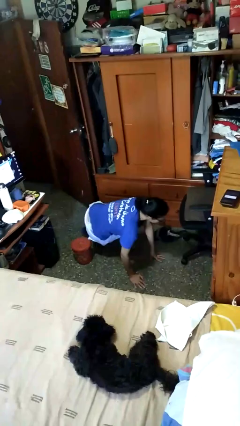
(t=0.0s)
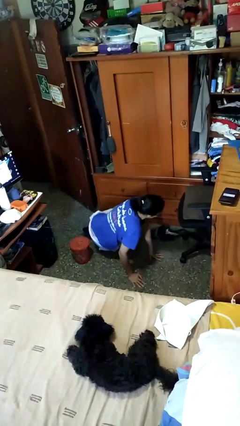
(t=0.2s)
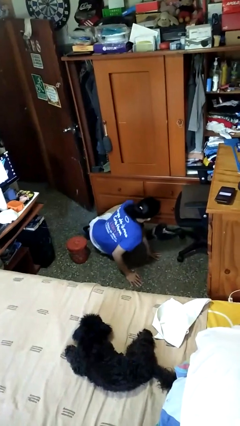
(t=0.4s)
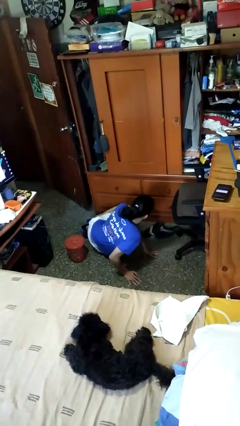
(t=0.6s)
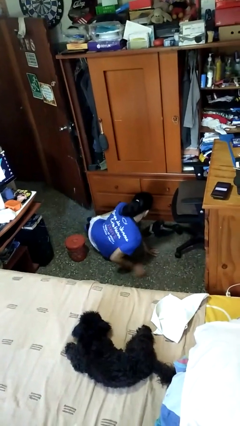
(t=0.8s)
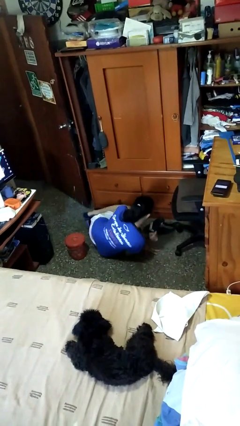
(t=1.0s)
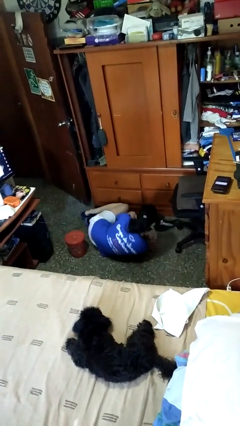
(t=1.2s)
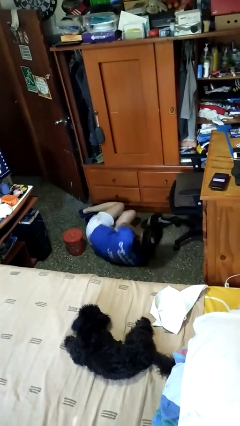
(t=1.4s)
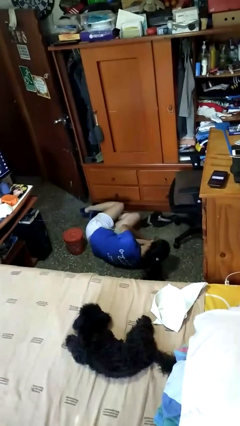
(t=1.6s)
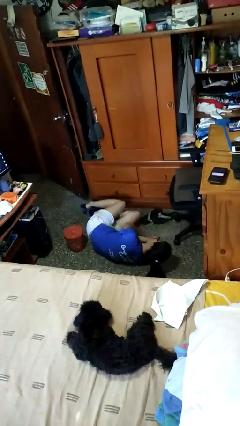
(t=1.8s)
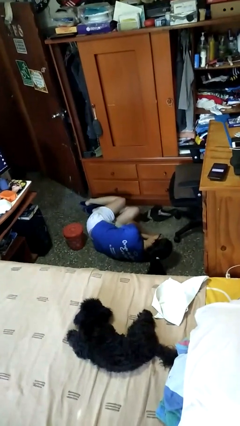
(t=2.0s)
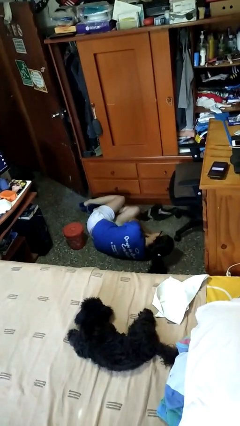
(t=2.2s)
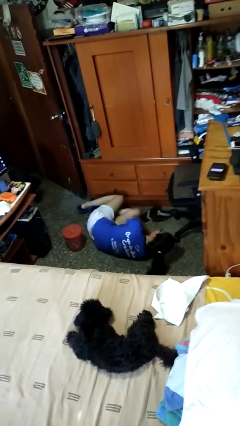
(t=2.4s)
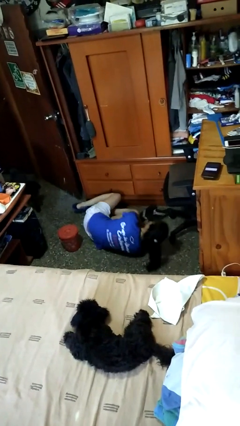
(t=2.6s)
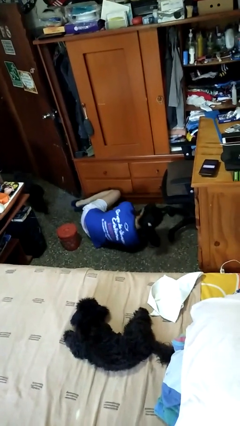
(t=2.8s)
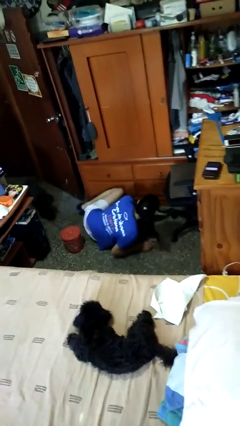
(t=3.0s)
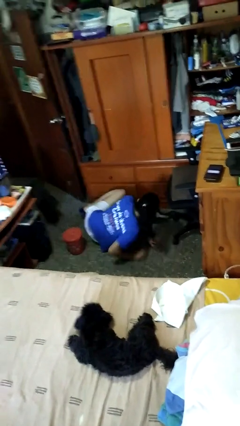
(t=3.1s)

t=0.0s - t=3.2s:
person lies down on floor

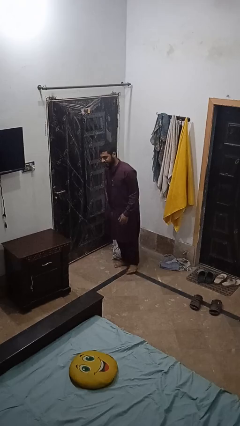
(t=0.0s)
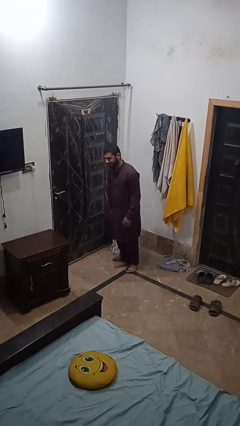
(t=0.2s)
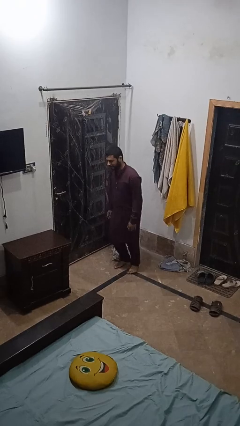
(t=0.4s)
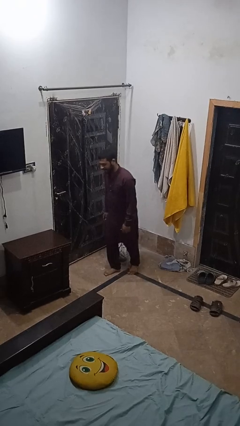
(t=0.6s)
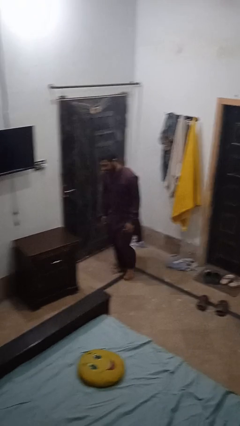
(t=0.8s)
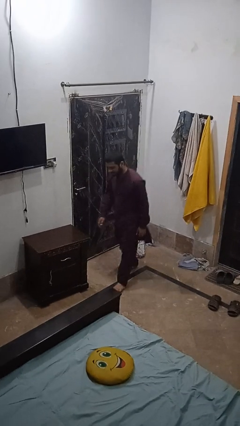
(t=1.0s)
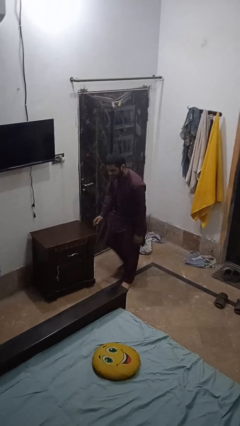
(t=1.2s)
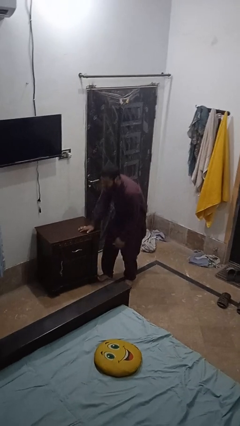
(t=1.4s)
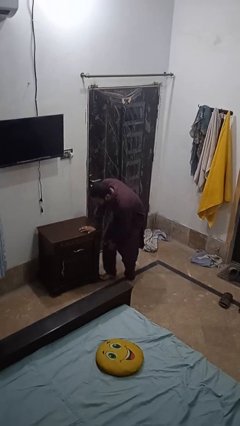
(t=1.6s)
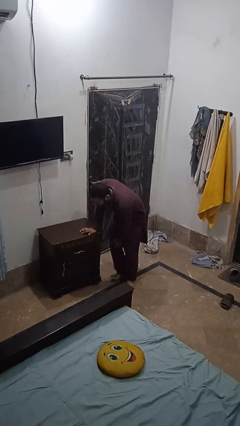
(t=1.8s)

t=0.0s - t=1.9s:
person stubs toe

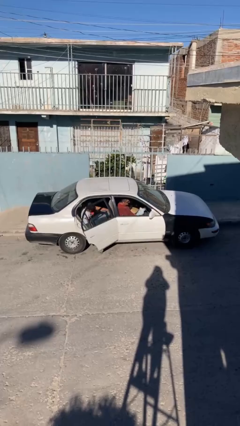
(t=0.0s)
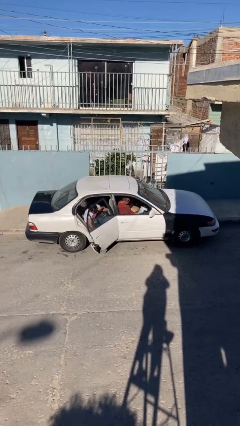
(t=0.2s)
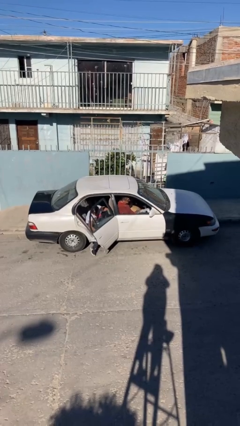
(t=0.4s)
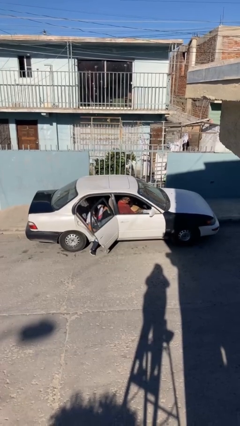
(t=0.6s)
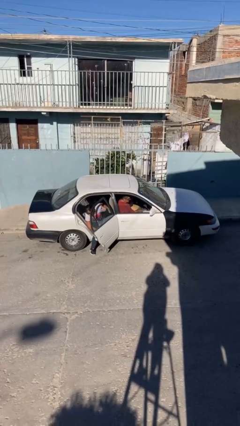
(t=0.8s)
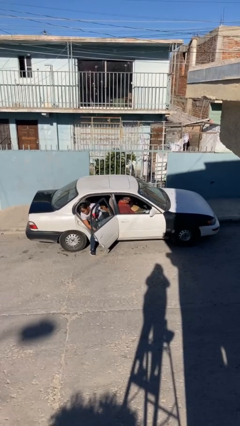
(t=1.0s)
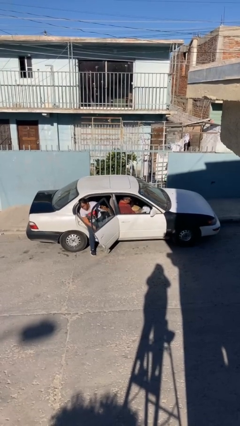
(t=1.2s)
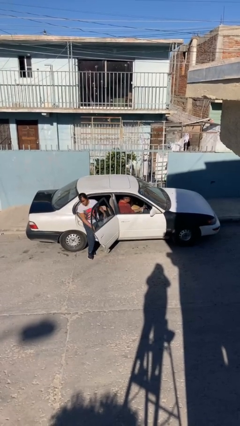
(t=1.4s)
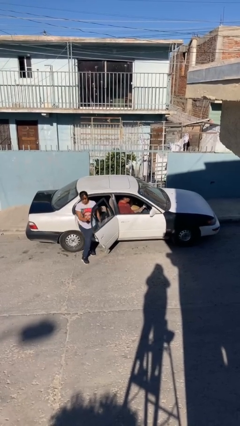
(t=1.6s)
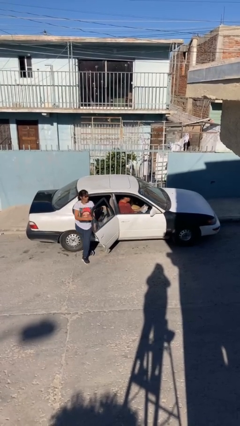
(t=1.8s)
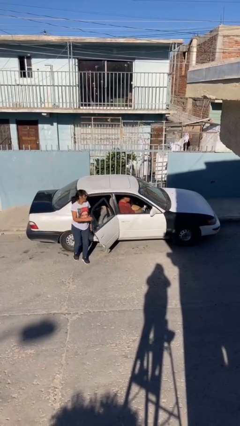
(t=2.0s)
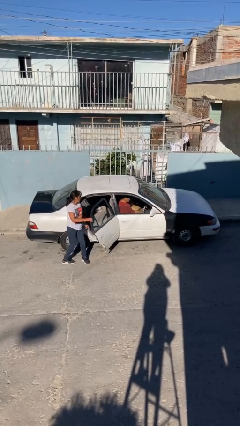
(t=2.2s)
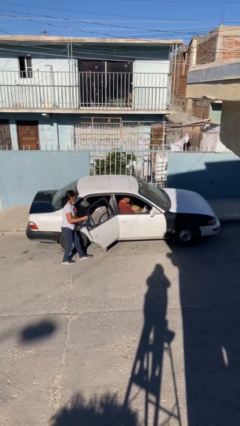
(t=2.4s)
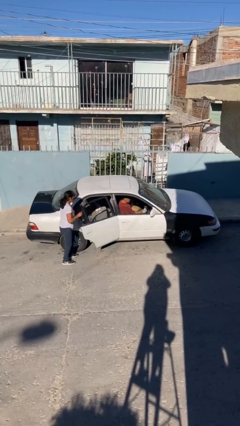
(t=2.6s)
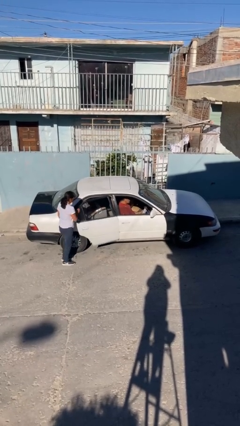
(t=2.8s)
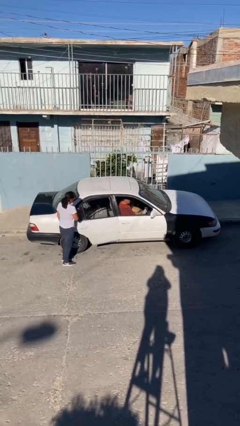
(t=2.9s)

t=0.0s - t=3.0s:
car drops off person

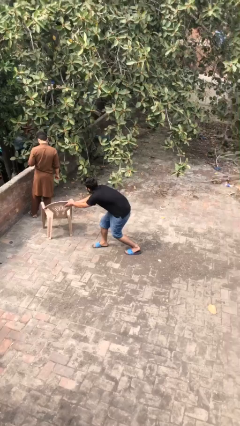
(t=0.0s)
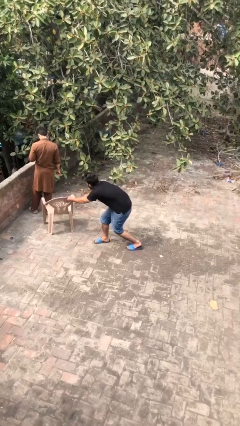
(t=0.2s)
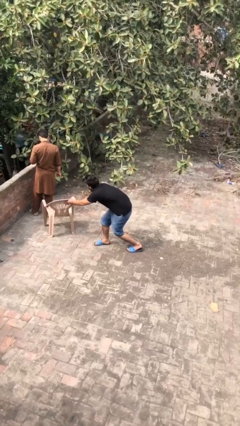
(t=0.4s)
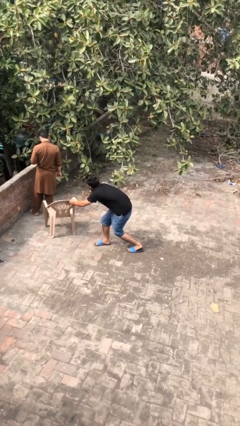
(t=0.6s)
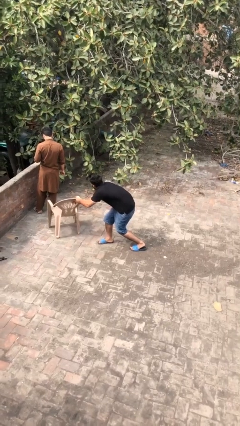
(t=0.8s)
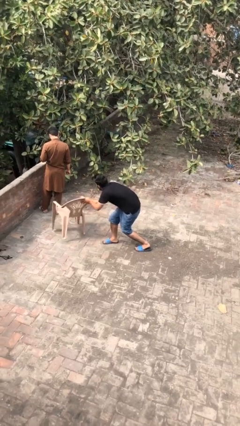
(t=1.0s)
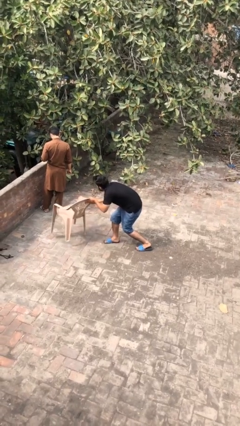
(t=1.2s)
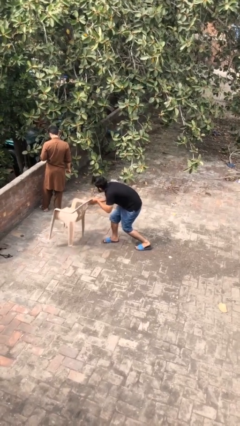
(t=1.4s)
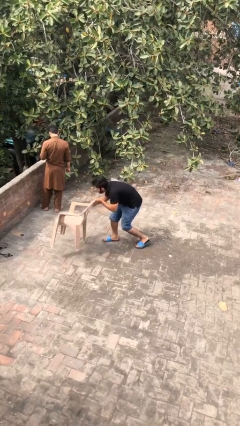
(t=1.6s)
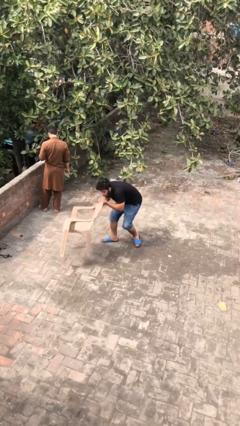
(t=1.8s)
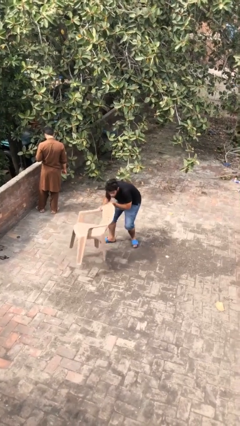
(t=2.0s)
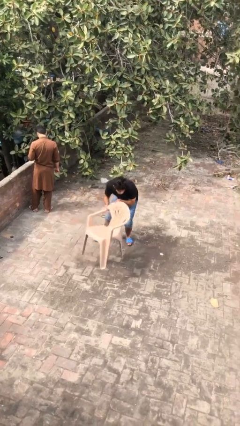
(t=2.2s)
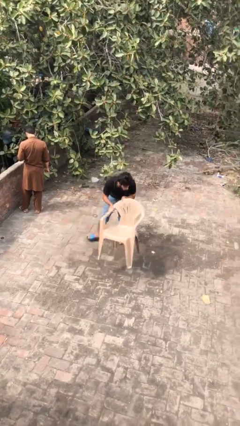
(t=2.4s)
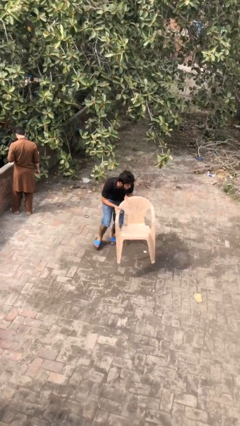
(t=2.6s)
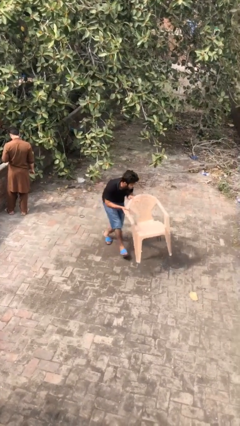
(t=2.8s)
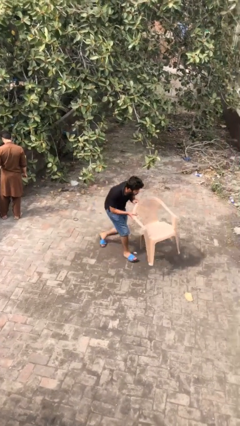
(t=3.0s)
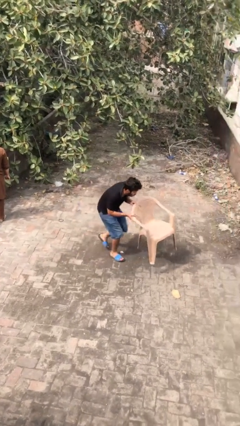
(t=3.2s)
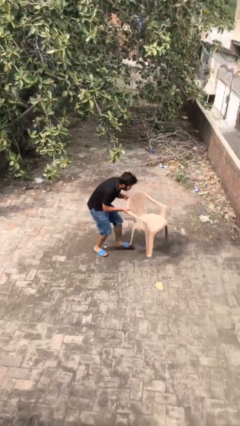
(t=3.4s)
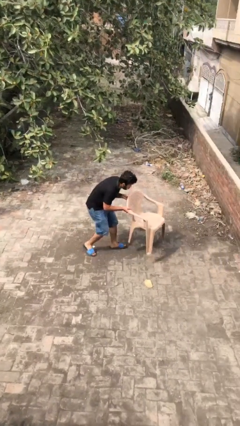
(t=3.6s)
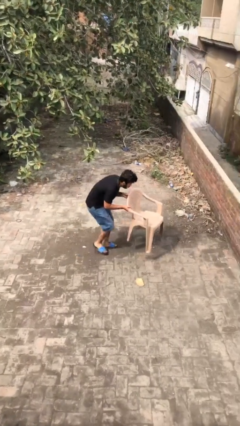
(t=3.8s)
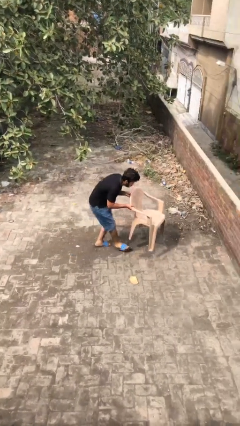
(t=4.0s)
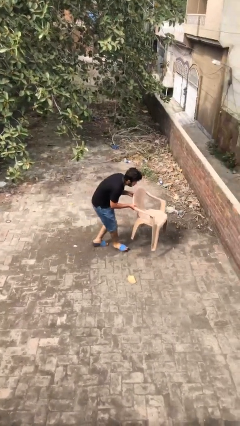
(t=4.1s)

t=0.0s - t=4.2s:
person steals object from person

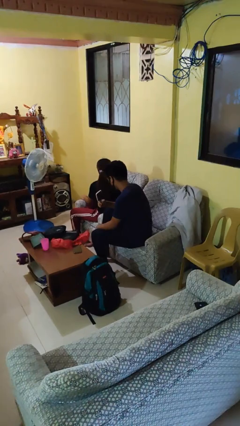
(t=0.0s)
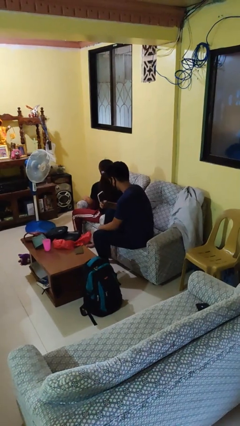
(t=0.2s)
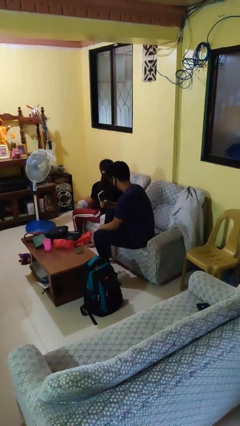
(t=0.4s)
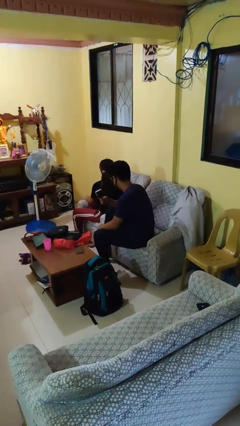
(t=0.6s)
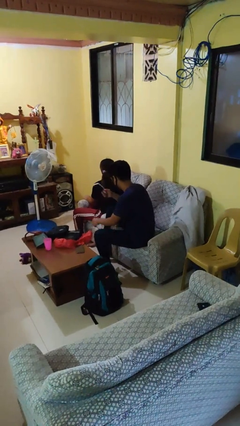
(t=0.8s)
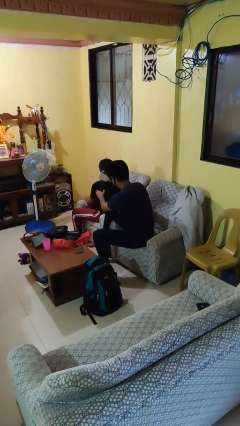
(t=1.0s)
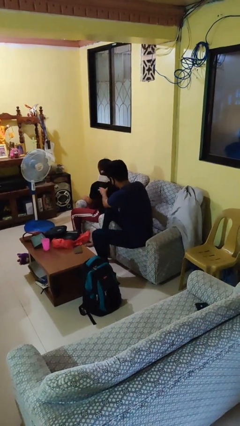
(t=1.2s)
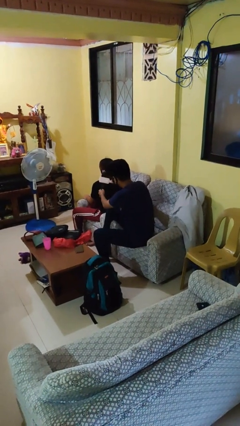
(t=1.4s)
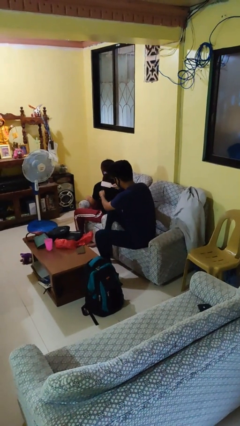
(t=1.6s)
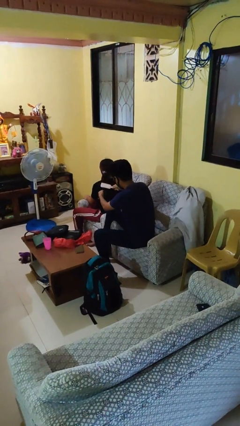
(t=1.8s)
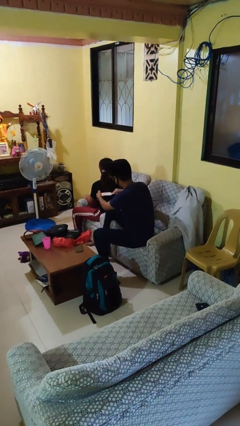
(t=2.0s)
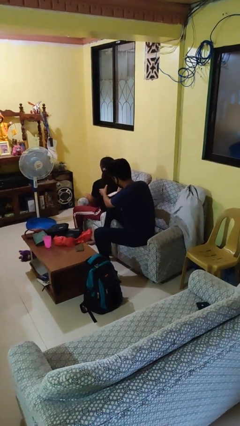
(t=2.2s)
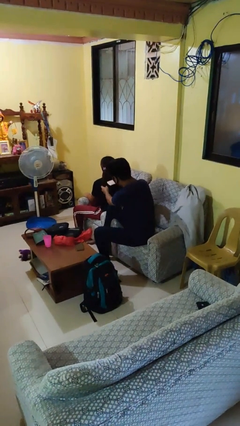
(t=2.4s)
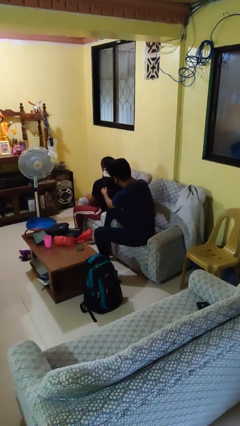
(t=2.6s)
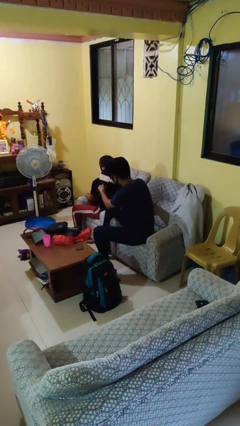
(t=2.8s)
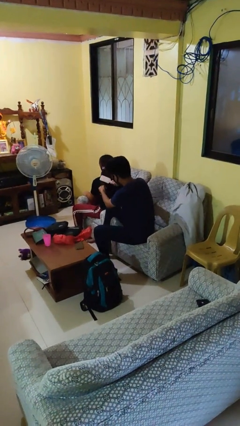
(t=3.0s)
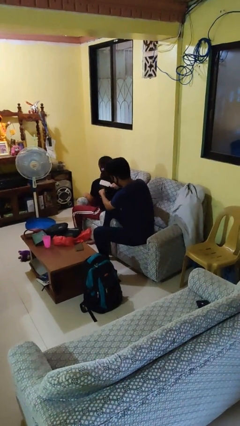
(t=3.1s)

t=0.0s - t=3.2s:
person brushes hair of person

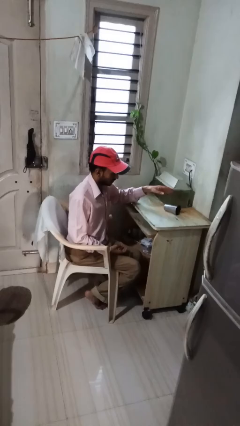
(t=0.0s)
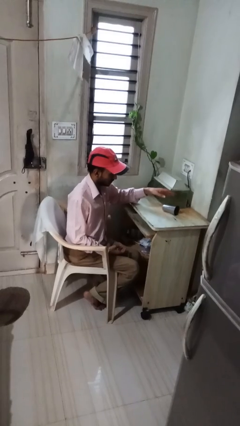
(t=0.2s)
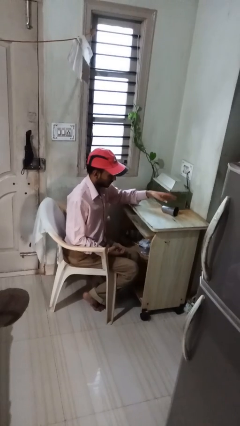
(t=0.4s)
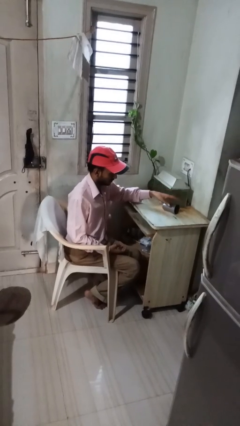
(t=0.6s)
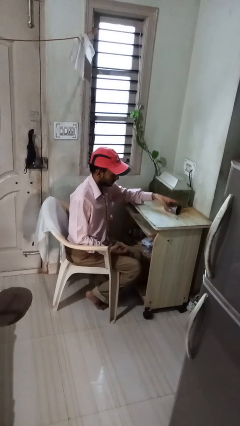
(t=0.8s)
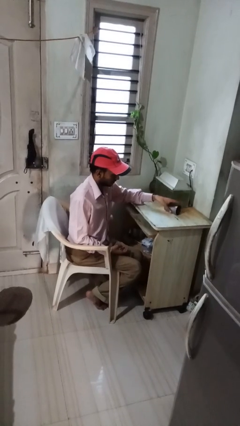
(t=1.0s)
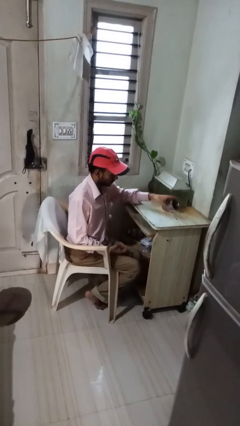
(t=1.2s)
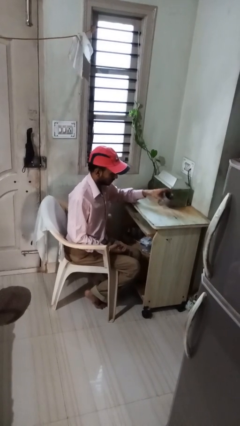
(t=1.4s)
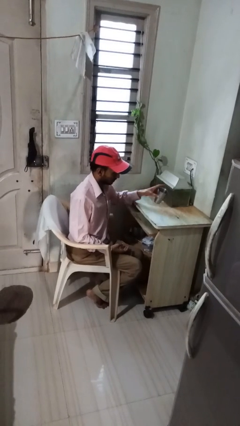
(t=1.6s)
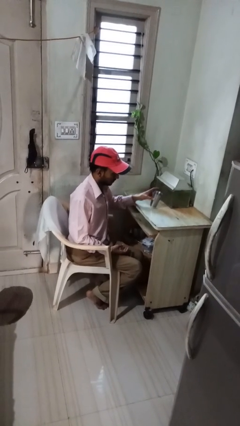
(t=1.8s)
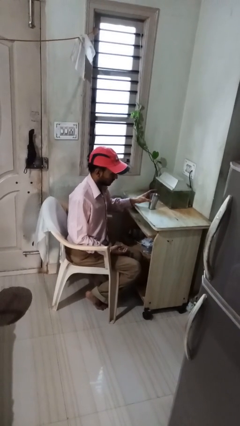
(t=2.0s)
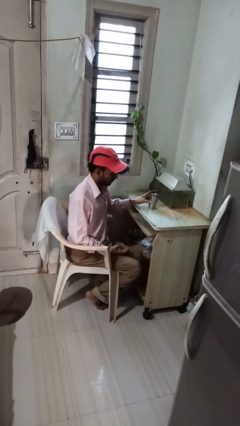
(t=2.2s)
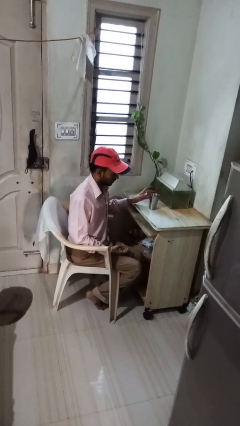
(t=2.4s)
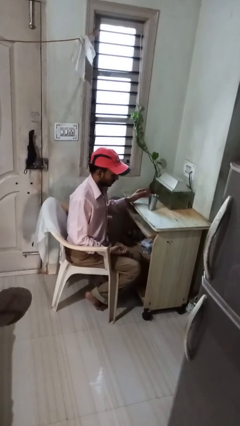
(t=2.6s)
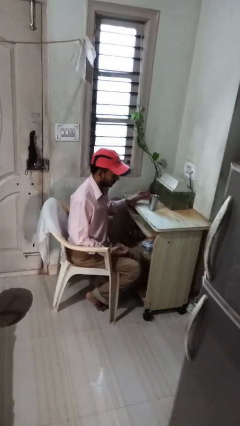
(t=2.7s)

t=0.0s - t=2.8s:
person sets upright glass
